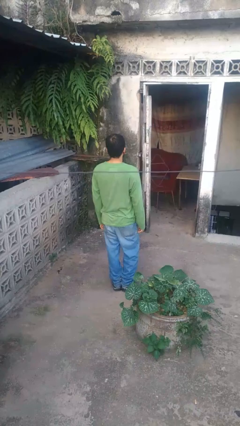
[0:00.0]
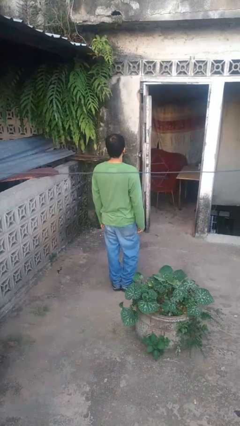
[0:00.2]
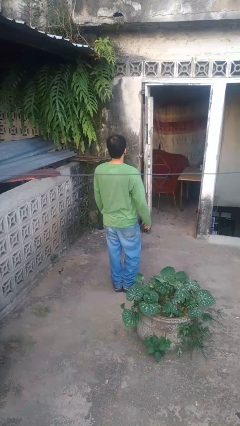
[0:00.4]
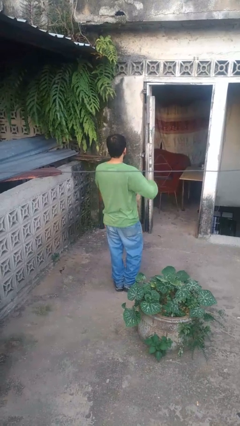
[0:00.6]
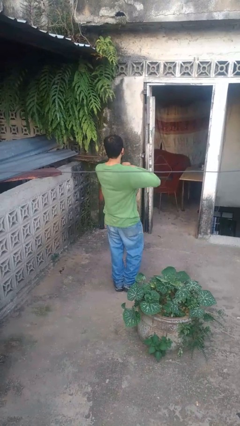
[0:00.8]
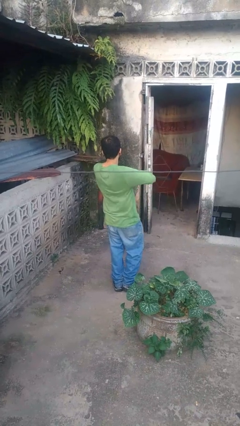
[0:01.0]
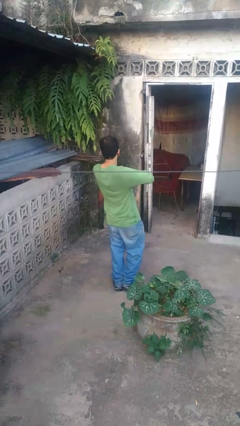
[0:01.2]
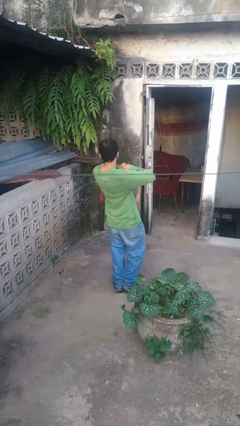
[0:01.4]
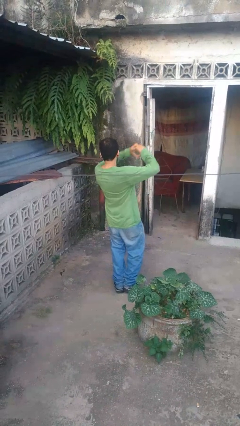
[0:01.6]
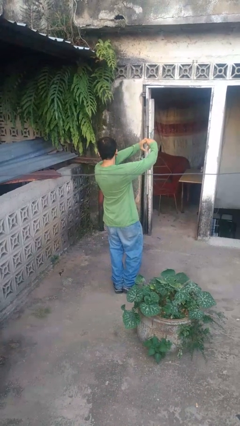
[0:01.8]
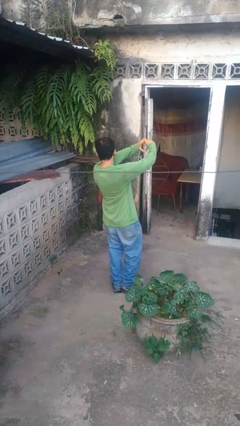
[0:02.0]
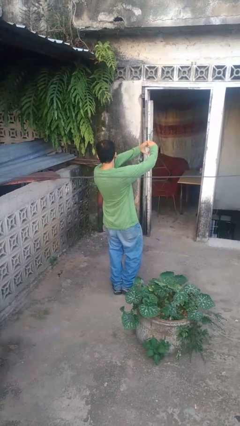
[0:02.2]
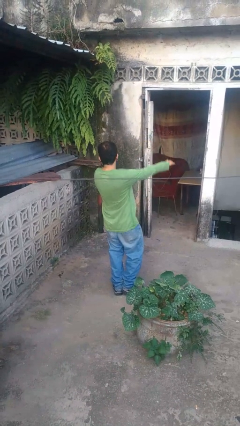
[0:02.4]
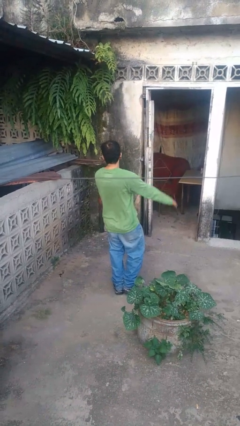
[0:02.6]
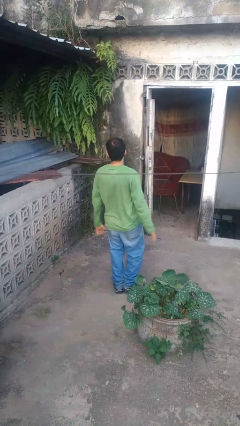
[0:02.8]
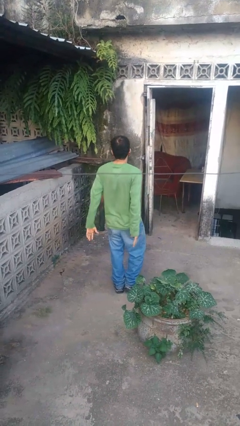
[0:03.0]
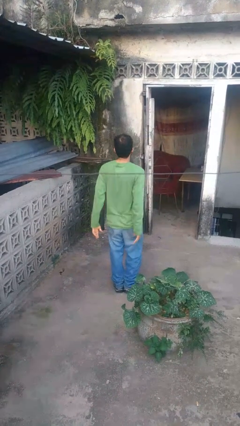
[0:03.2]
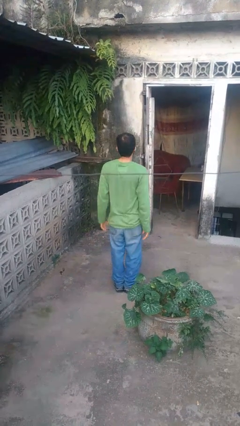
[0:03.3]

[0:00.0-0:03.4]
person gestures heart

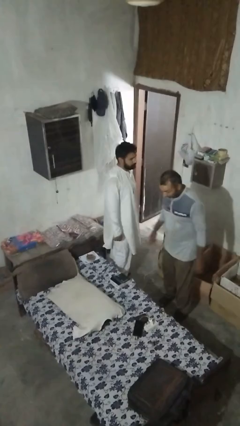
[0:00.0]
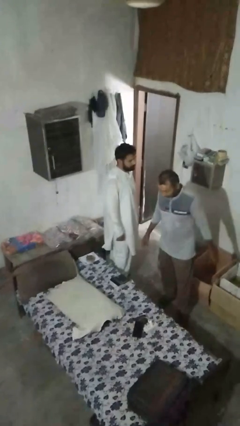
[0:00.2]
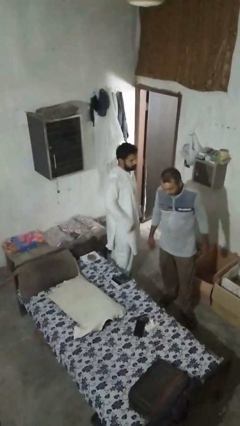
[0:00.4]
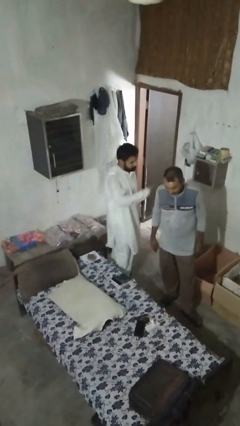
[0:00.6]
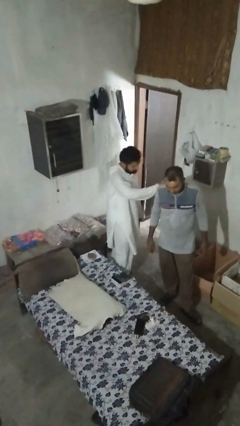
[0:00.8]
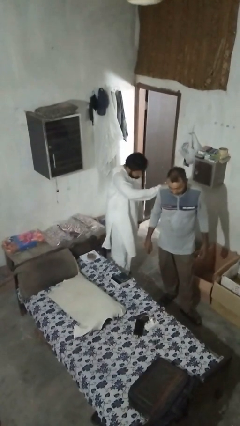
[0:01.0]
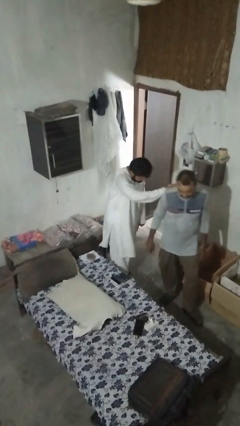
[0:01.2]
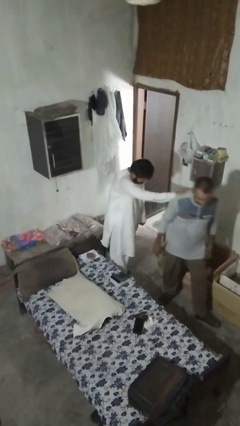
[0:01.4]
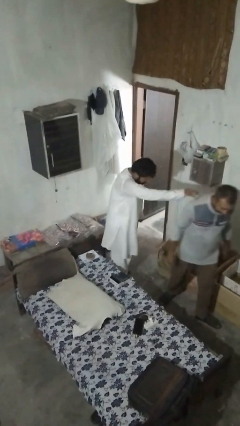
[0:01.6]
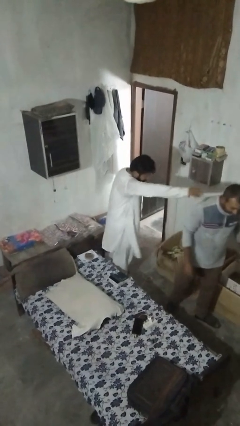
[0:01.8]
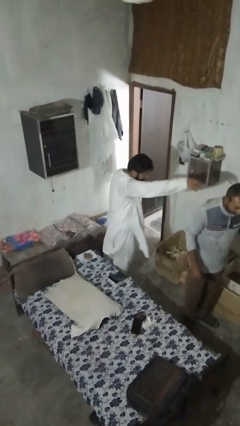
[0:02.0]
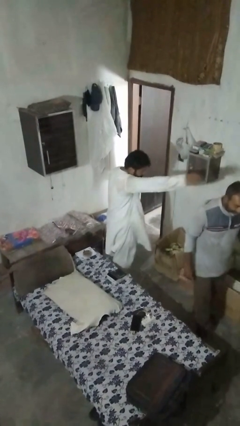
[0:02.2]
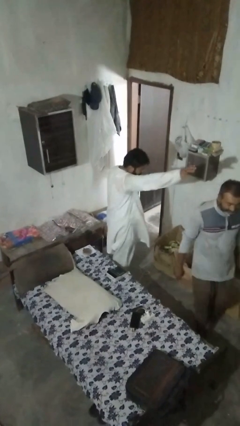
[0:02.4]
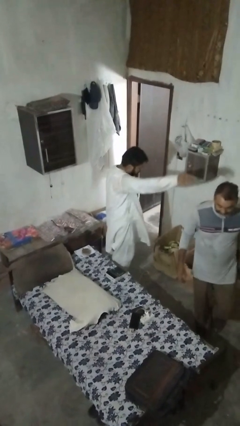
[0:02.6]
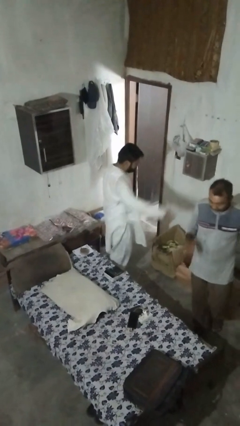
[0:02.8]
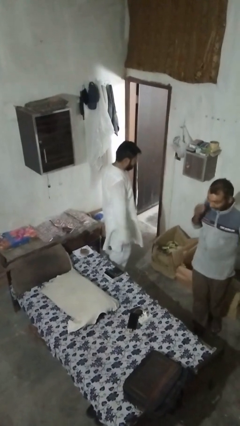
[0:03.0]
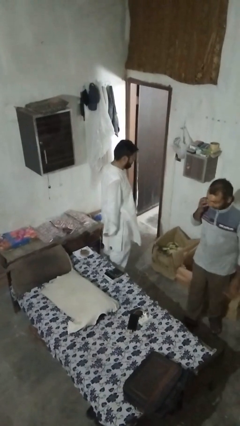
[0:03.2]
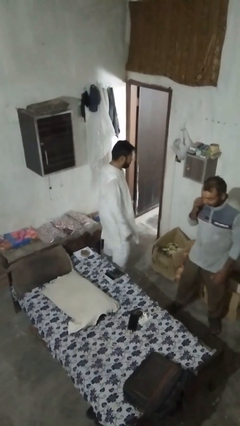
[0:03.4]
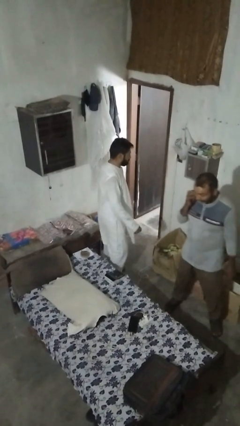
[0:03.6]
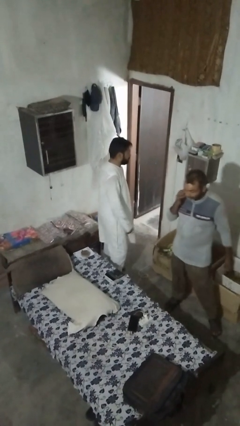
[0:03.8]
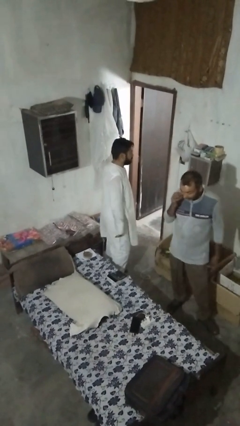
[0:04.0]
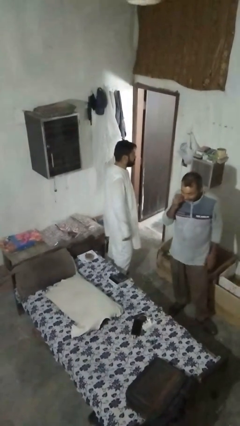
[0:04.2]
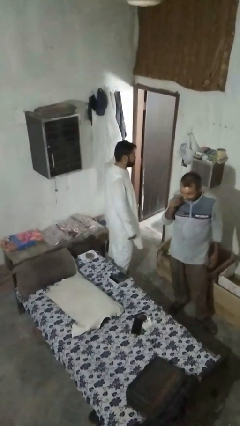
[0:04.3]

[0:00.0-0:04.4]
person shoves person

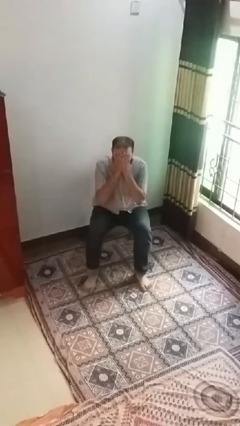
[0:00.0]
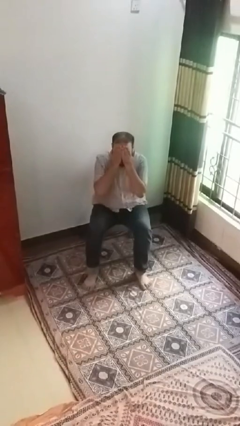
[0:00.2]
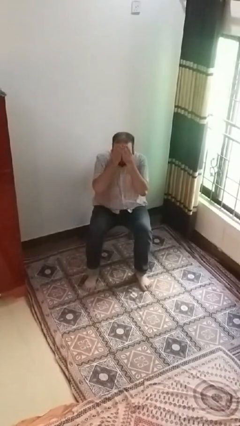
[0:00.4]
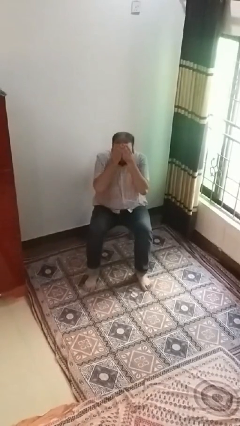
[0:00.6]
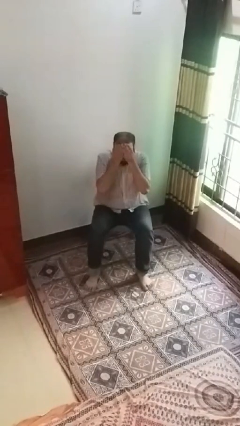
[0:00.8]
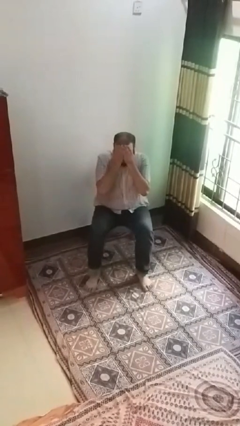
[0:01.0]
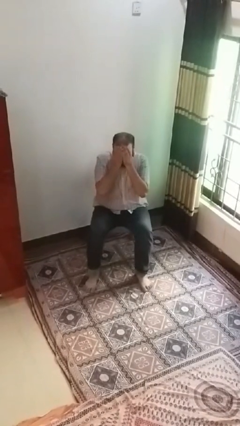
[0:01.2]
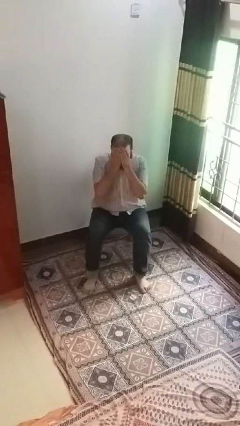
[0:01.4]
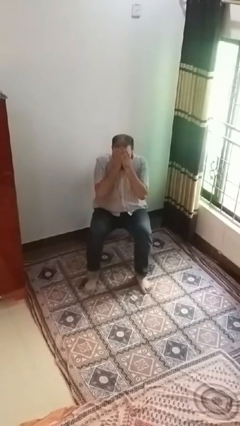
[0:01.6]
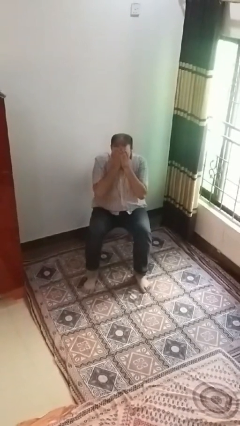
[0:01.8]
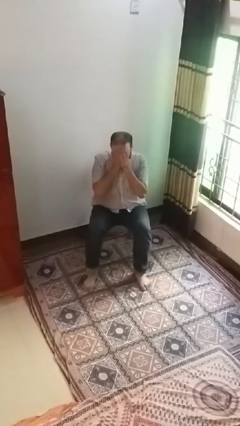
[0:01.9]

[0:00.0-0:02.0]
person covers face with hands

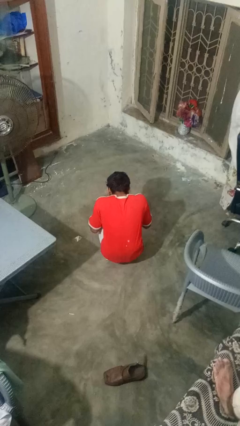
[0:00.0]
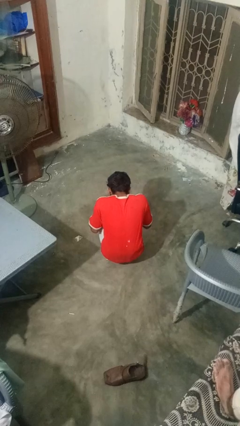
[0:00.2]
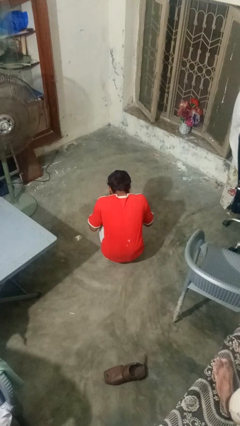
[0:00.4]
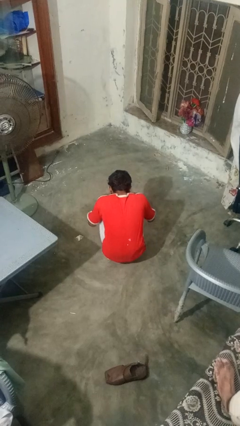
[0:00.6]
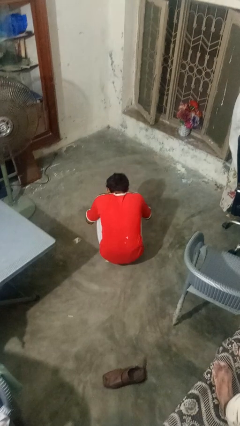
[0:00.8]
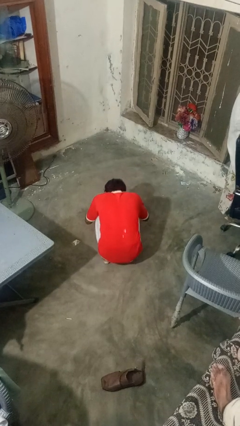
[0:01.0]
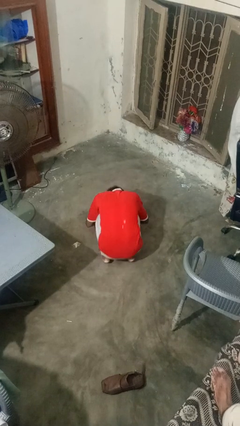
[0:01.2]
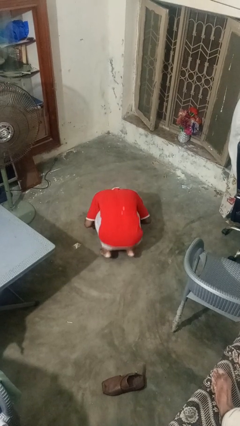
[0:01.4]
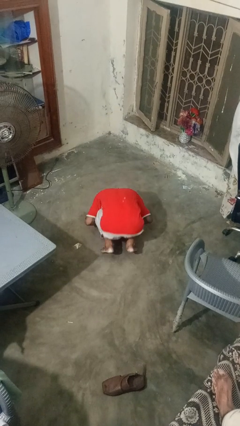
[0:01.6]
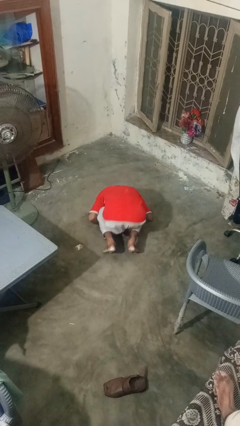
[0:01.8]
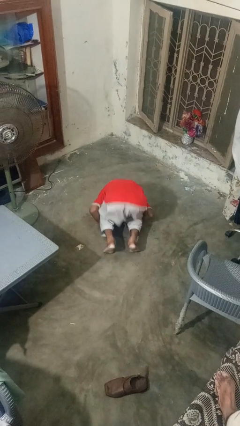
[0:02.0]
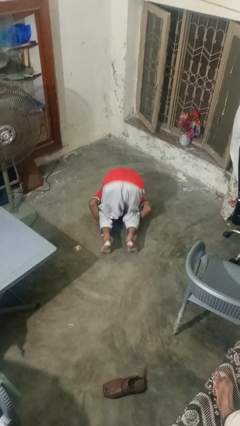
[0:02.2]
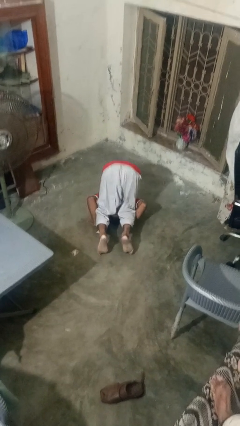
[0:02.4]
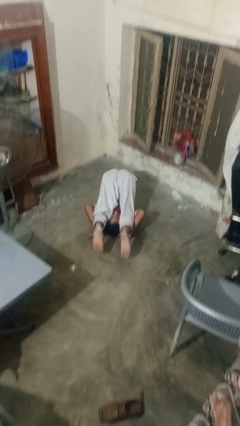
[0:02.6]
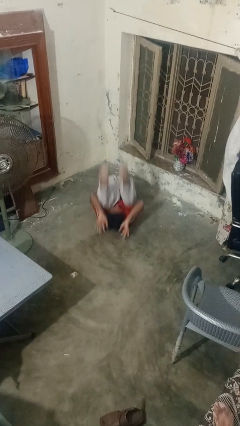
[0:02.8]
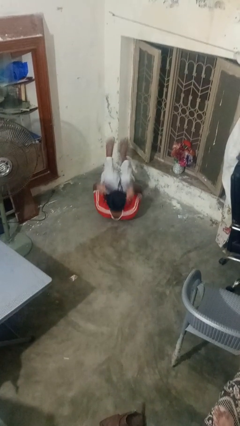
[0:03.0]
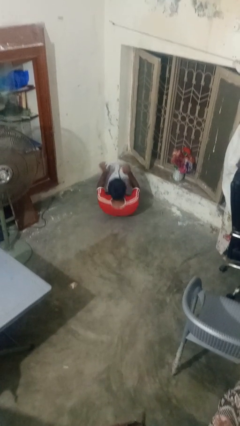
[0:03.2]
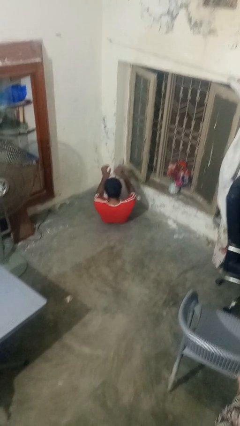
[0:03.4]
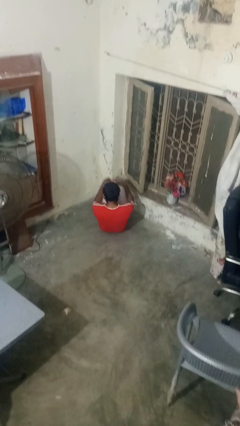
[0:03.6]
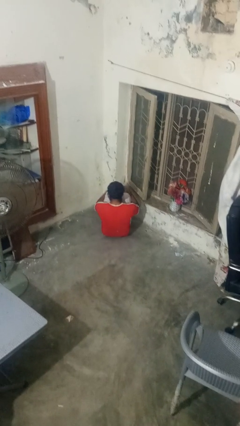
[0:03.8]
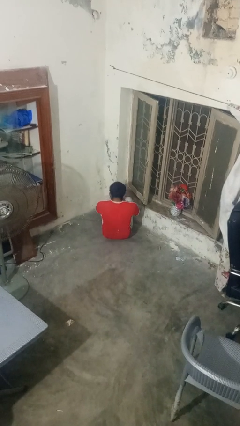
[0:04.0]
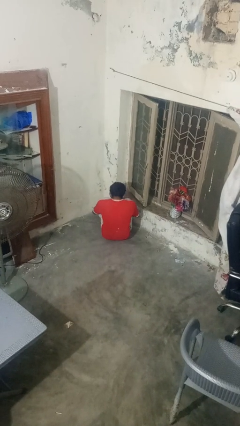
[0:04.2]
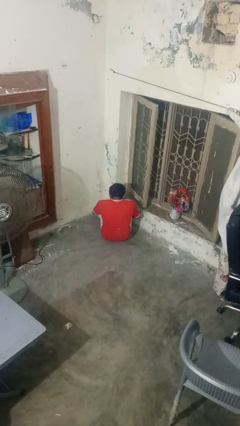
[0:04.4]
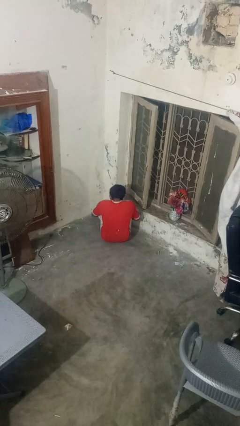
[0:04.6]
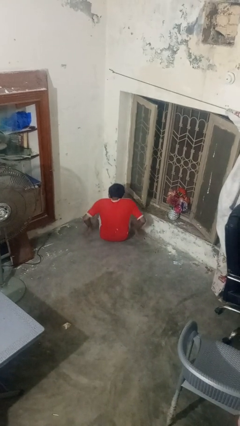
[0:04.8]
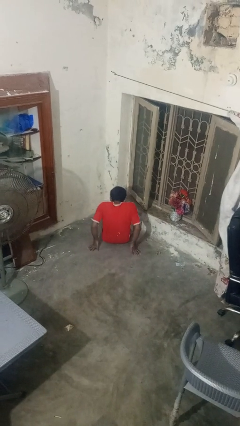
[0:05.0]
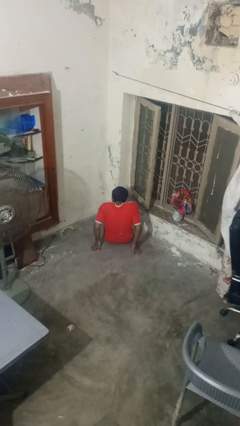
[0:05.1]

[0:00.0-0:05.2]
person somersaults

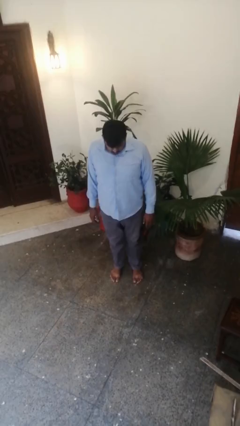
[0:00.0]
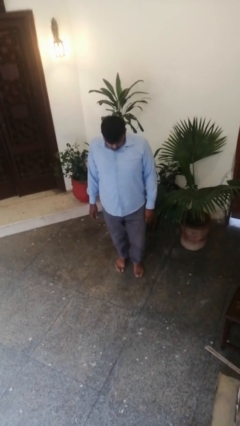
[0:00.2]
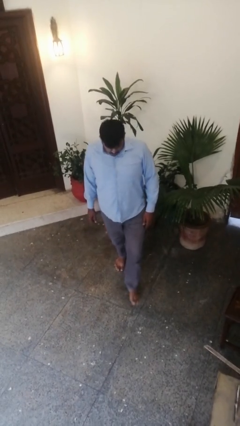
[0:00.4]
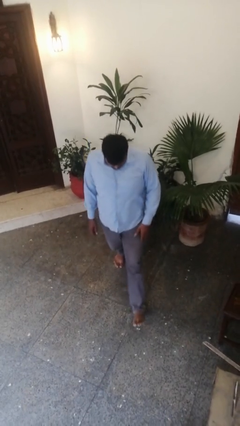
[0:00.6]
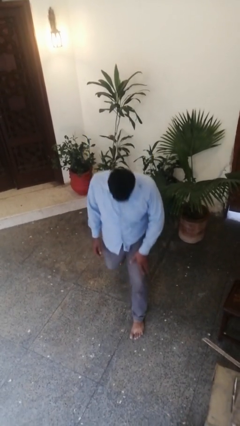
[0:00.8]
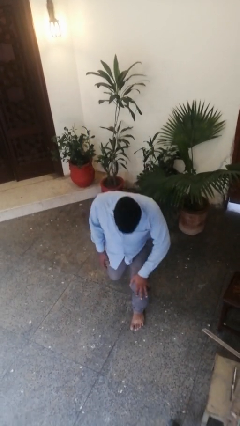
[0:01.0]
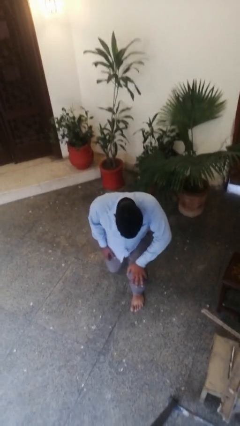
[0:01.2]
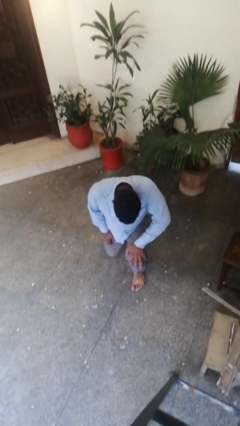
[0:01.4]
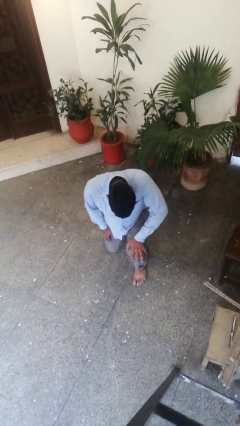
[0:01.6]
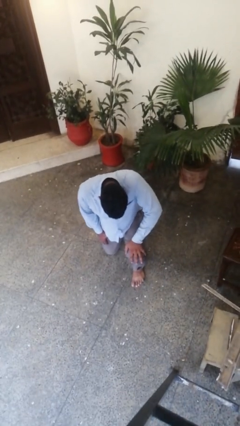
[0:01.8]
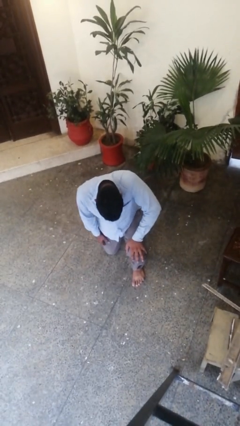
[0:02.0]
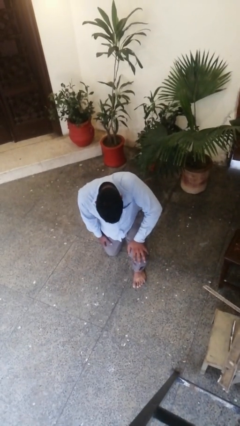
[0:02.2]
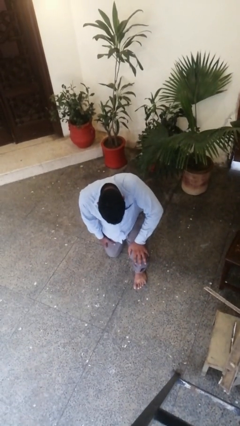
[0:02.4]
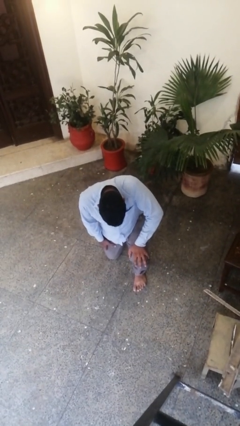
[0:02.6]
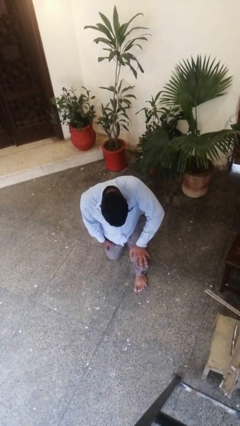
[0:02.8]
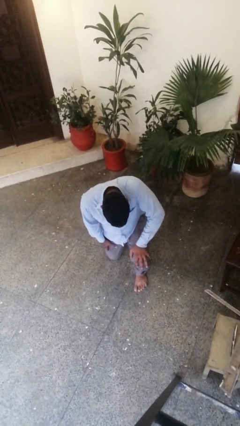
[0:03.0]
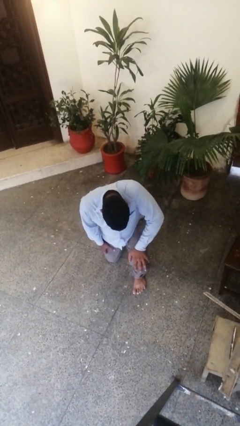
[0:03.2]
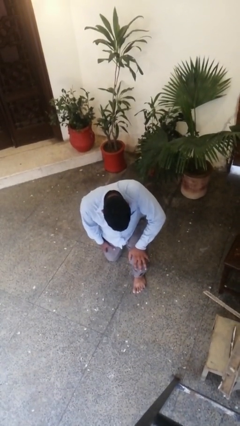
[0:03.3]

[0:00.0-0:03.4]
person kneels
